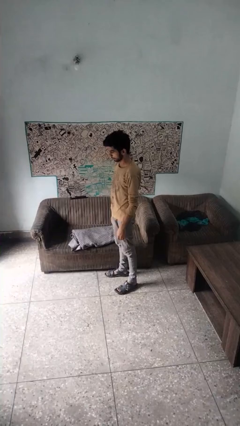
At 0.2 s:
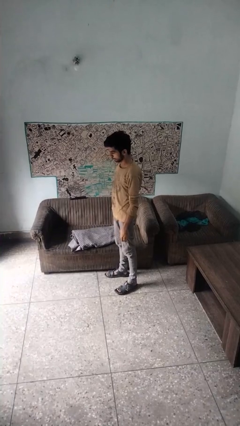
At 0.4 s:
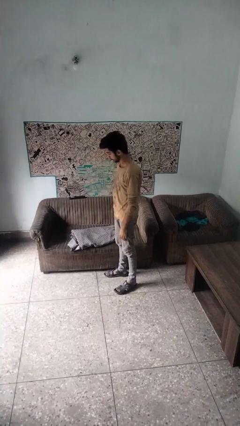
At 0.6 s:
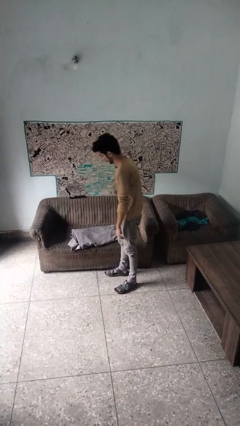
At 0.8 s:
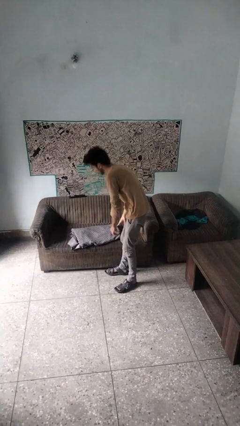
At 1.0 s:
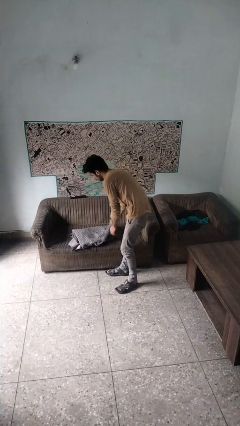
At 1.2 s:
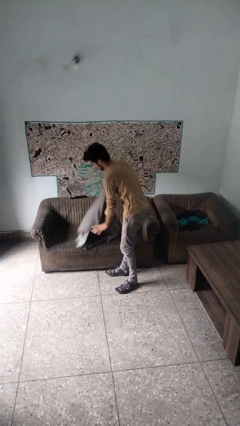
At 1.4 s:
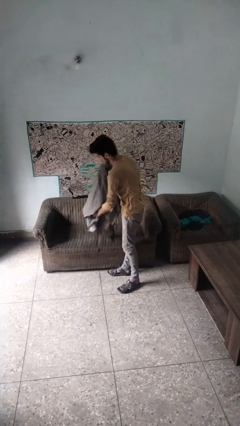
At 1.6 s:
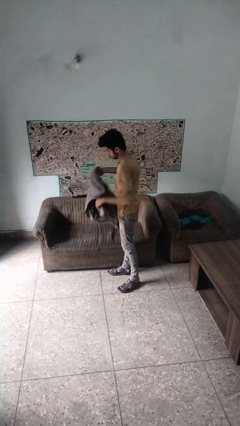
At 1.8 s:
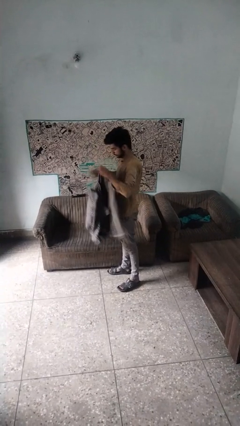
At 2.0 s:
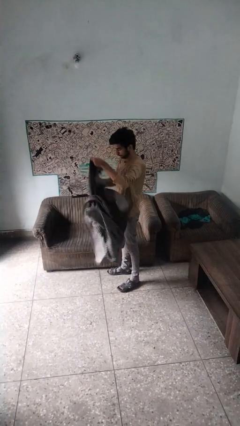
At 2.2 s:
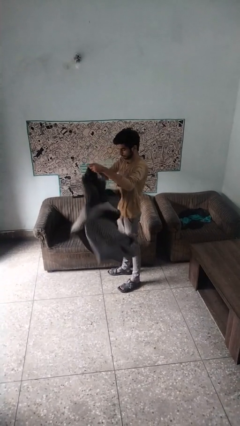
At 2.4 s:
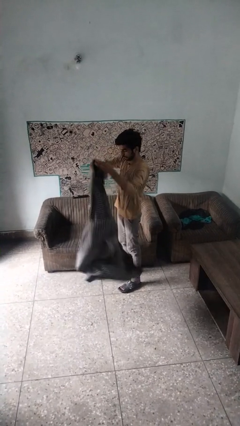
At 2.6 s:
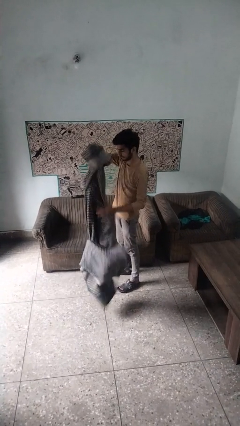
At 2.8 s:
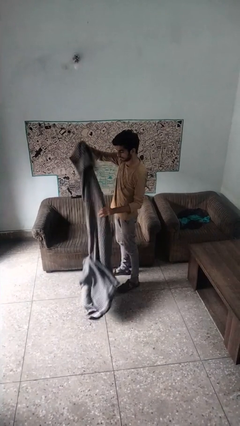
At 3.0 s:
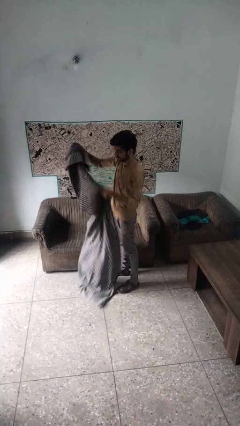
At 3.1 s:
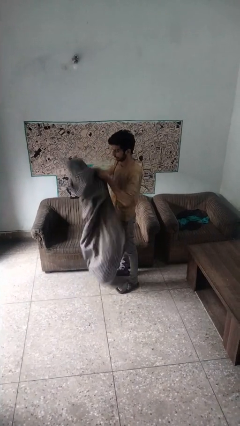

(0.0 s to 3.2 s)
person unfolds blanket

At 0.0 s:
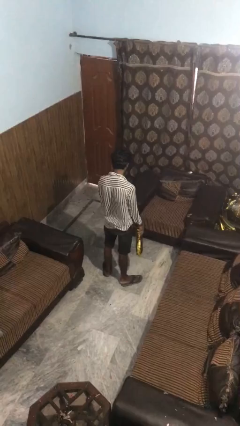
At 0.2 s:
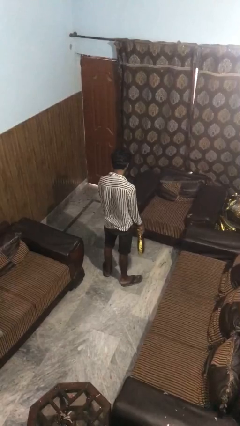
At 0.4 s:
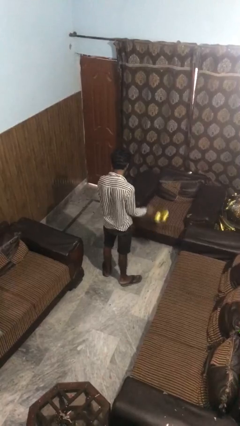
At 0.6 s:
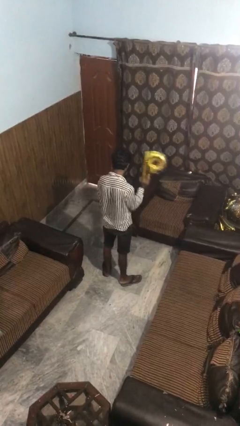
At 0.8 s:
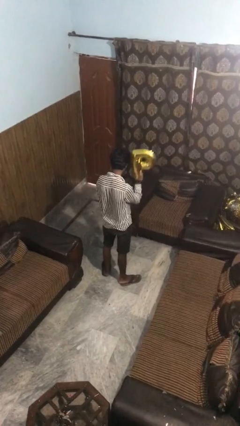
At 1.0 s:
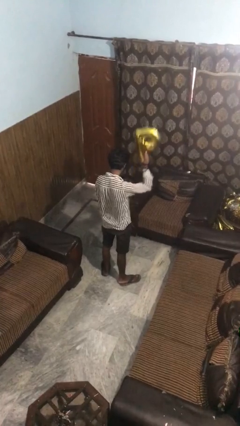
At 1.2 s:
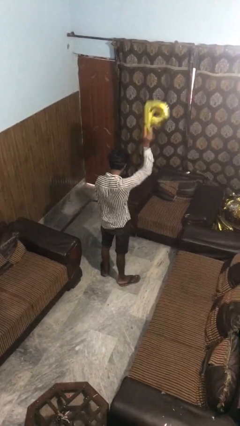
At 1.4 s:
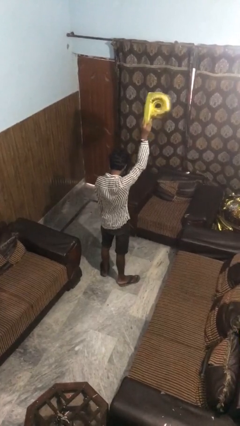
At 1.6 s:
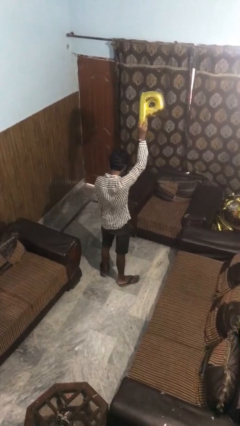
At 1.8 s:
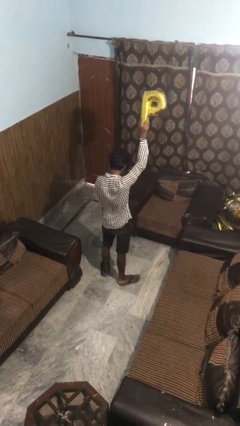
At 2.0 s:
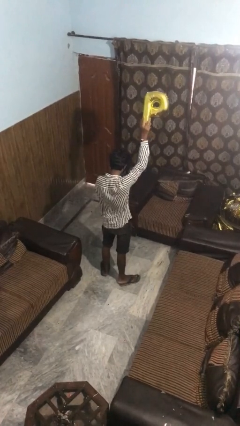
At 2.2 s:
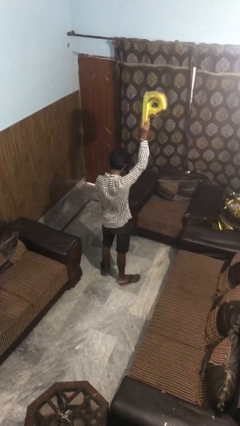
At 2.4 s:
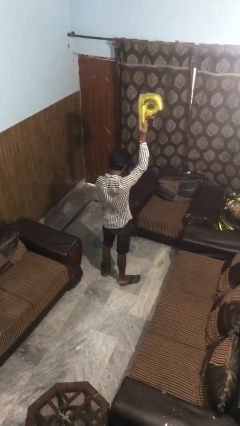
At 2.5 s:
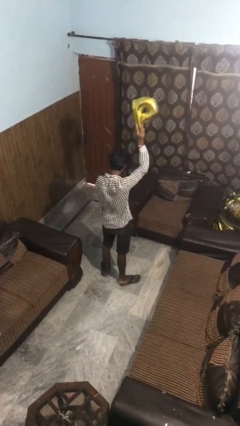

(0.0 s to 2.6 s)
person holds object above head

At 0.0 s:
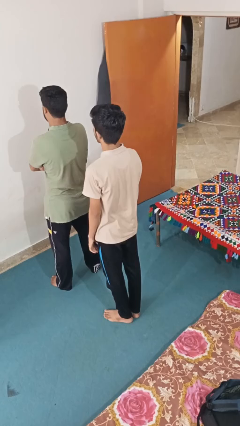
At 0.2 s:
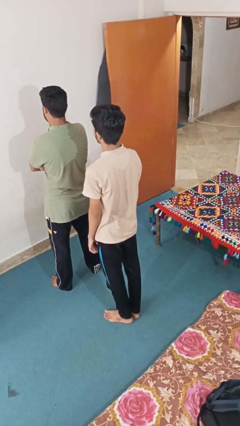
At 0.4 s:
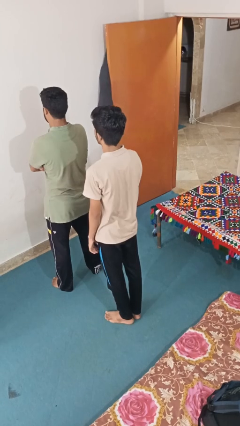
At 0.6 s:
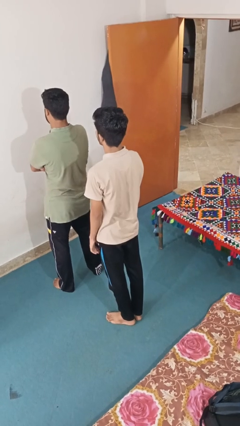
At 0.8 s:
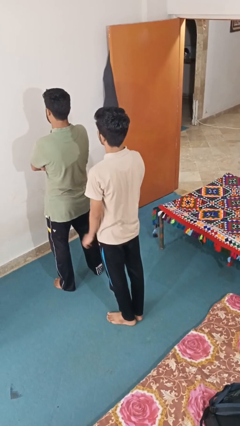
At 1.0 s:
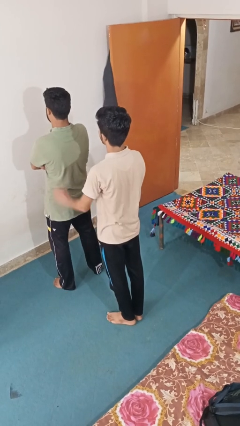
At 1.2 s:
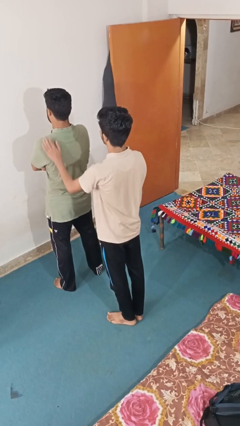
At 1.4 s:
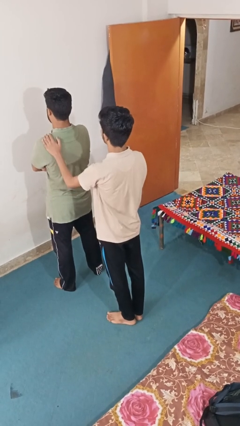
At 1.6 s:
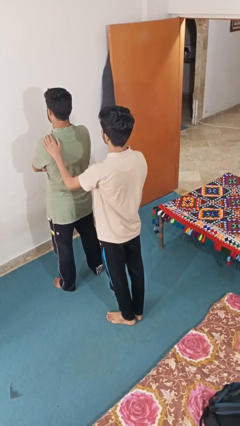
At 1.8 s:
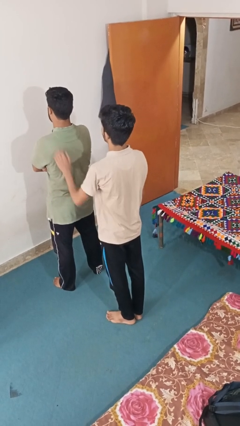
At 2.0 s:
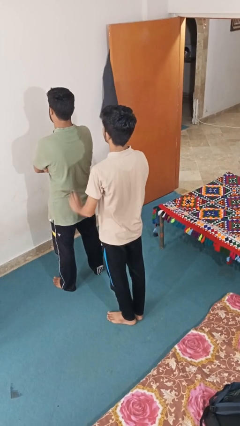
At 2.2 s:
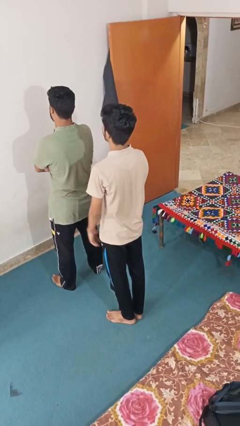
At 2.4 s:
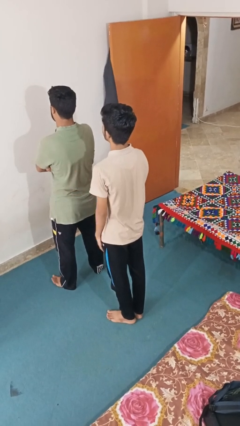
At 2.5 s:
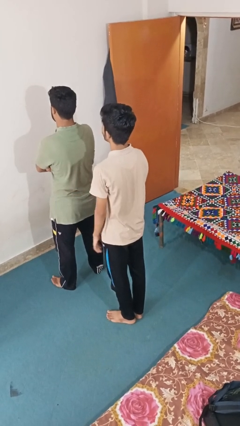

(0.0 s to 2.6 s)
person touches back of person

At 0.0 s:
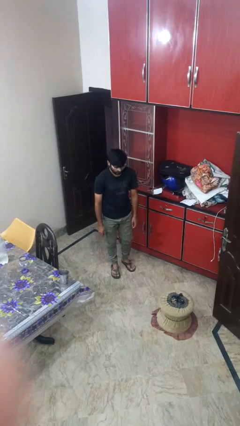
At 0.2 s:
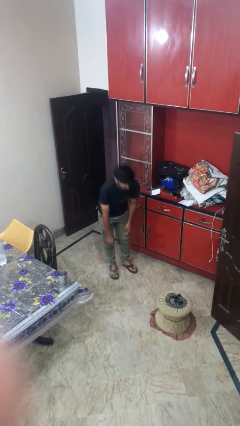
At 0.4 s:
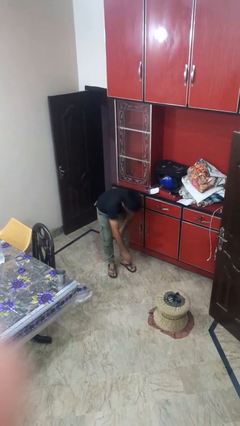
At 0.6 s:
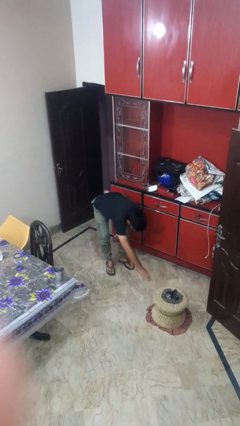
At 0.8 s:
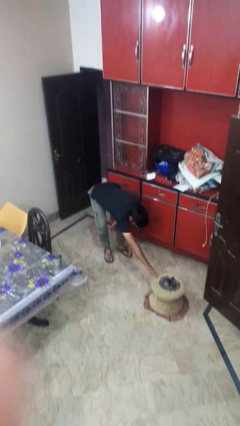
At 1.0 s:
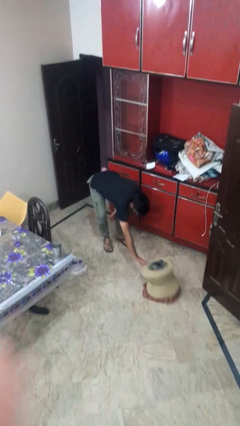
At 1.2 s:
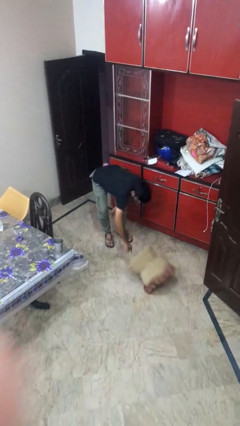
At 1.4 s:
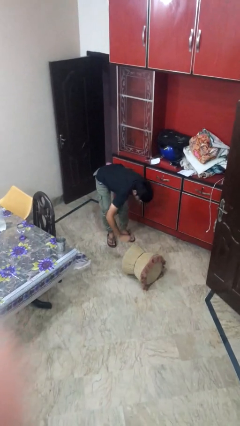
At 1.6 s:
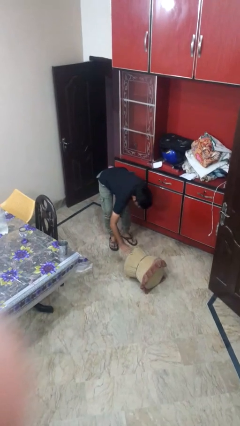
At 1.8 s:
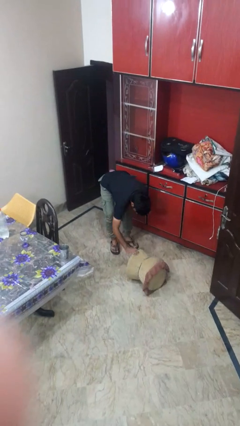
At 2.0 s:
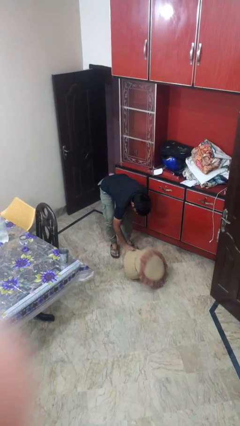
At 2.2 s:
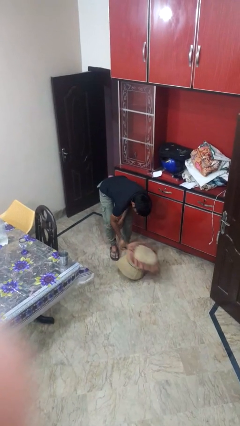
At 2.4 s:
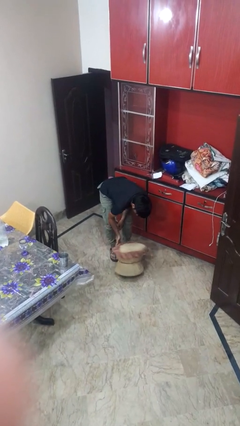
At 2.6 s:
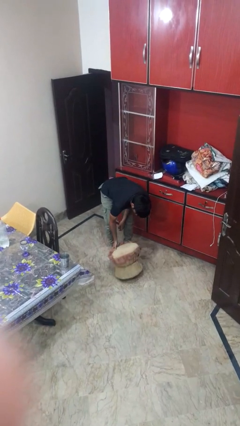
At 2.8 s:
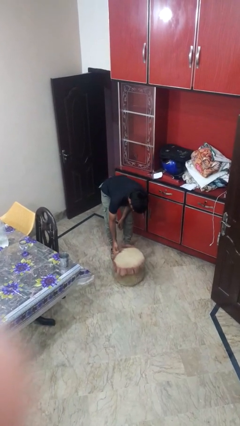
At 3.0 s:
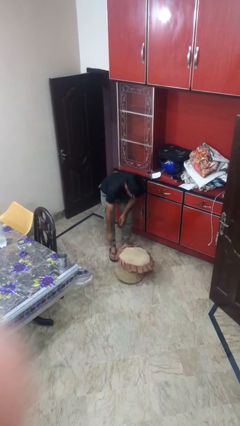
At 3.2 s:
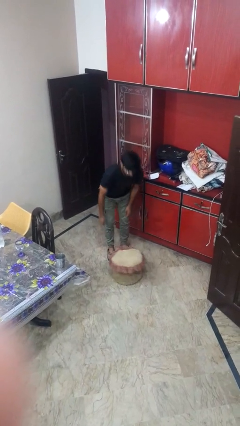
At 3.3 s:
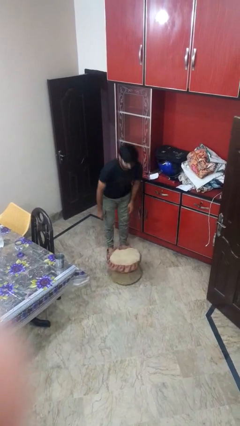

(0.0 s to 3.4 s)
person sets upright furniture

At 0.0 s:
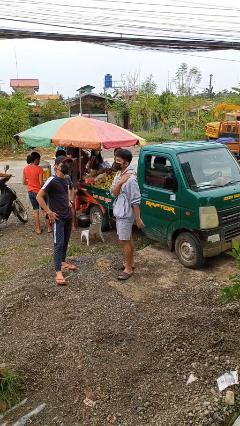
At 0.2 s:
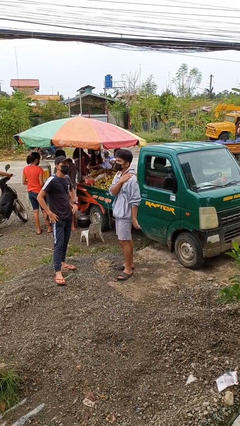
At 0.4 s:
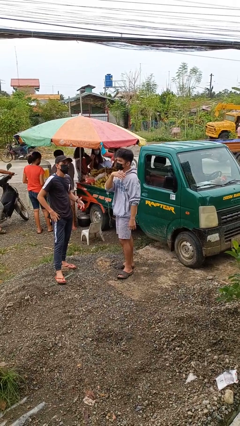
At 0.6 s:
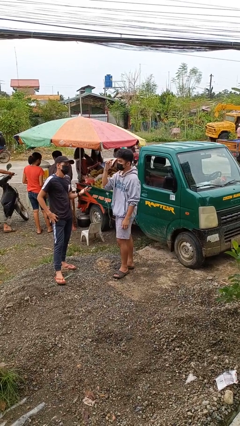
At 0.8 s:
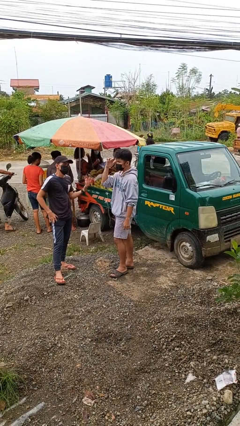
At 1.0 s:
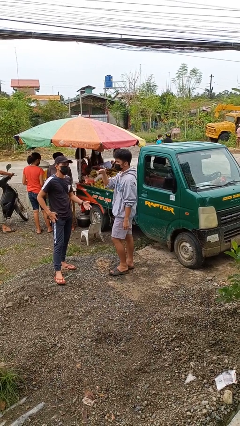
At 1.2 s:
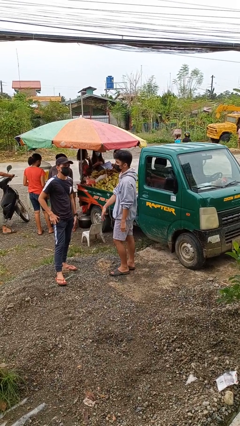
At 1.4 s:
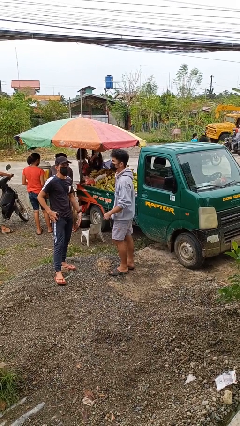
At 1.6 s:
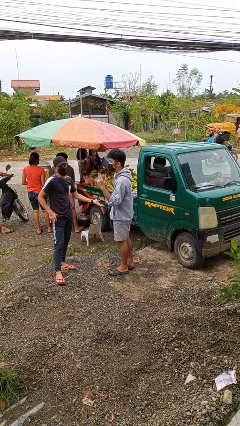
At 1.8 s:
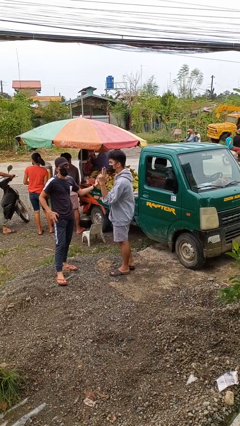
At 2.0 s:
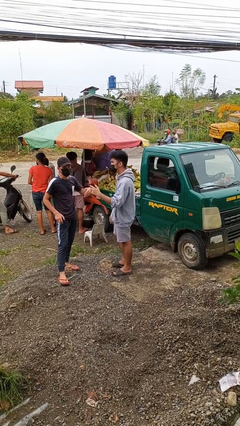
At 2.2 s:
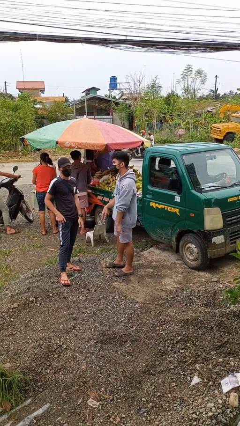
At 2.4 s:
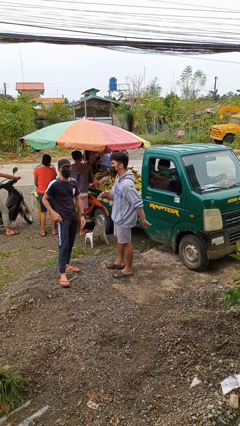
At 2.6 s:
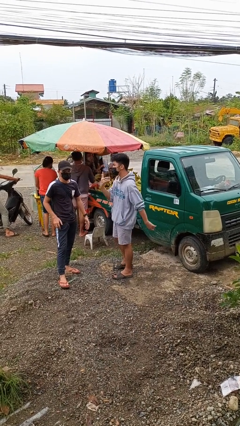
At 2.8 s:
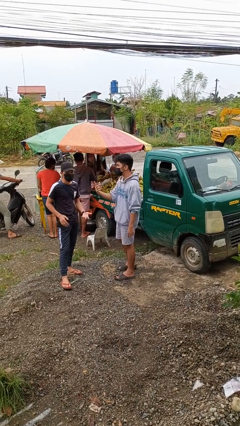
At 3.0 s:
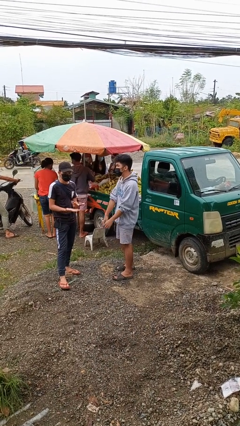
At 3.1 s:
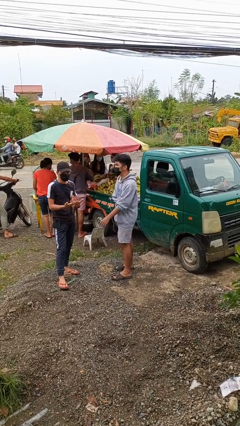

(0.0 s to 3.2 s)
person talks to person

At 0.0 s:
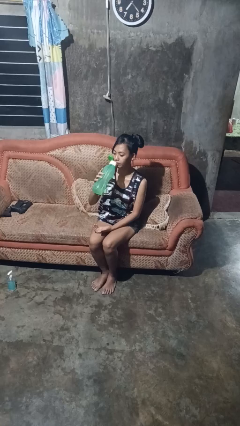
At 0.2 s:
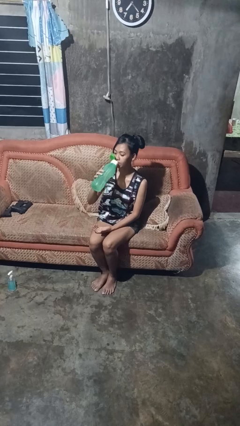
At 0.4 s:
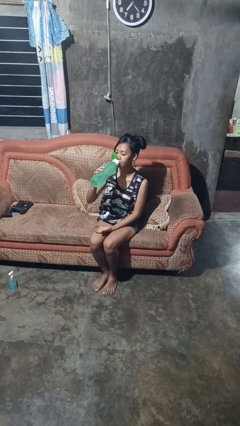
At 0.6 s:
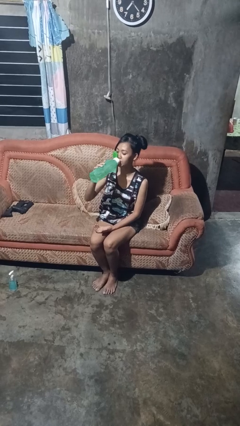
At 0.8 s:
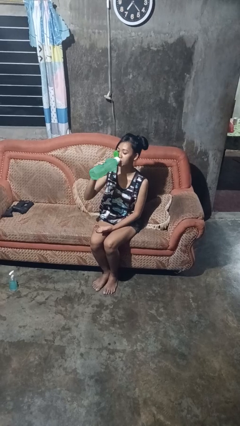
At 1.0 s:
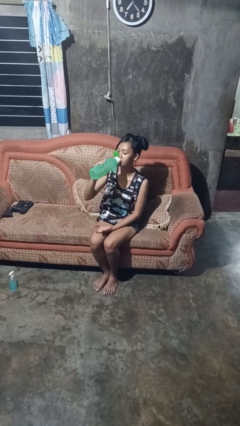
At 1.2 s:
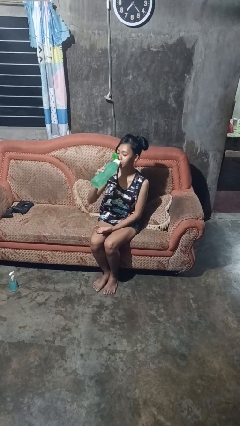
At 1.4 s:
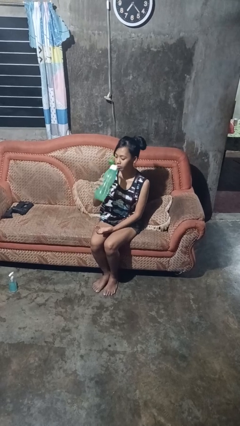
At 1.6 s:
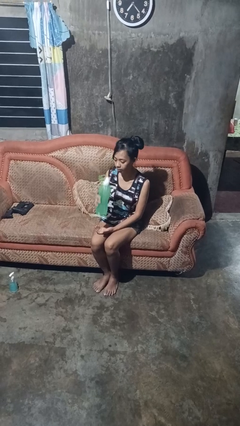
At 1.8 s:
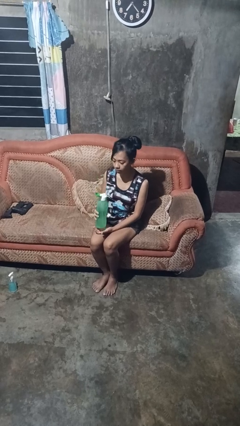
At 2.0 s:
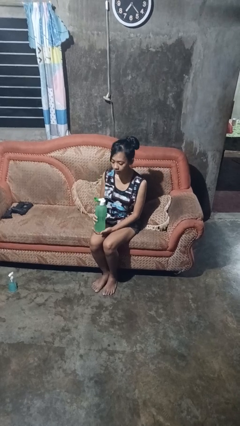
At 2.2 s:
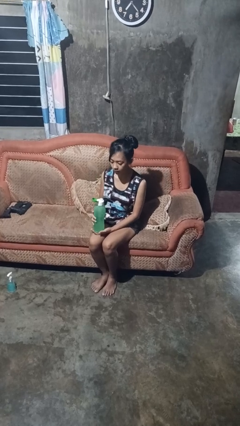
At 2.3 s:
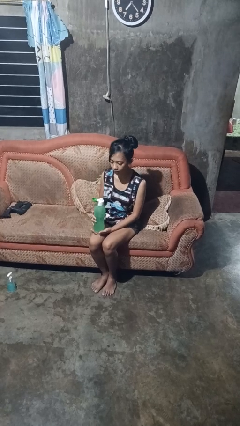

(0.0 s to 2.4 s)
person drinks from bottle
